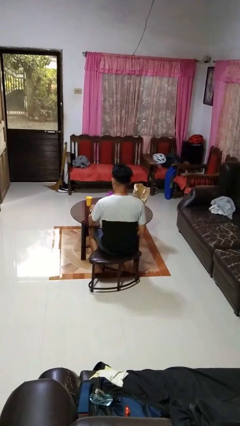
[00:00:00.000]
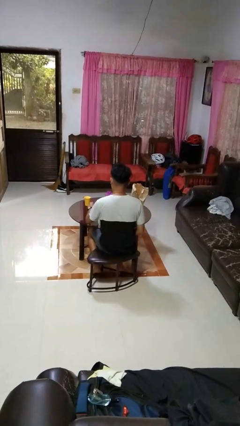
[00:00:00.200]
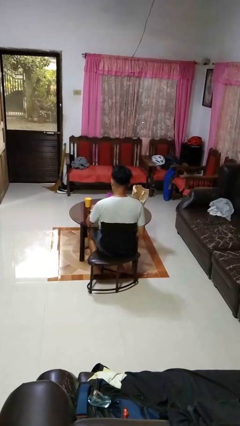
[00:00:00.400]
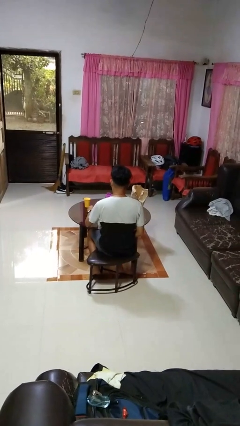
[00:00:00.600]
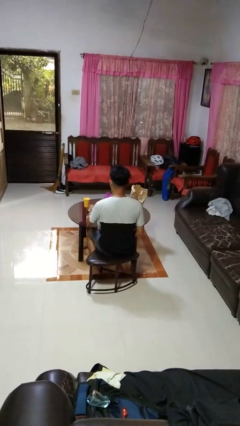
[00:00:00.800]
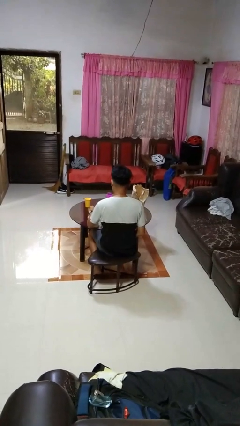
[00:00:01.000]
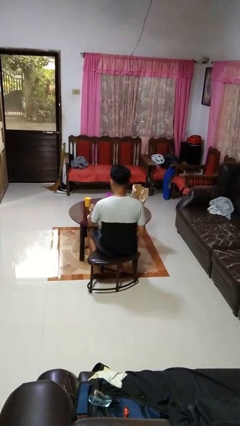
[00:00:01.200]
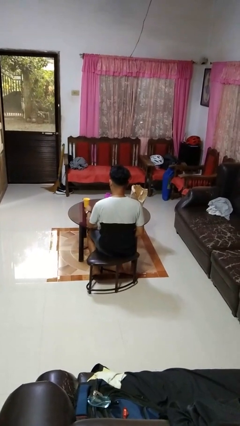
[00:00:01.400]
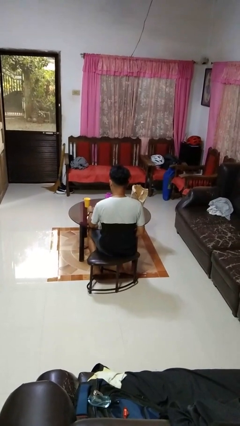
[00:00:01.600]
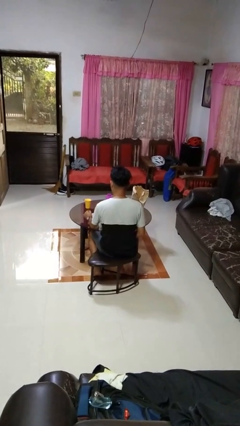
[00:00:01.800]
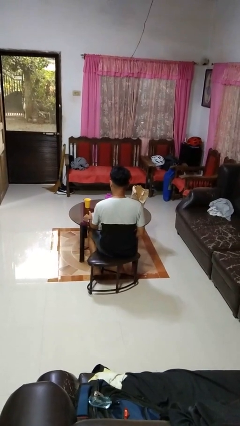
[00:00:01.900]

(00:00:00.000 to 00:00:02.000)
person stirs mug

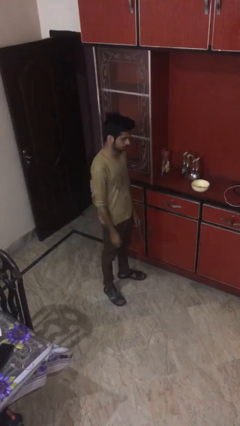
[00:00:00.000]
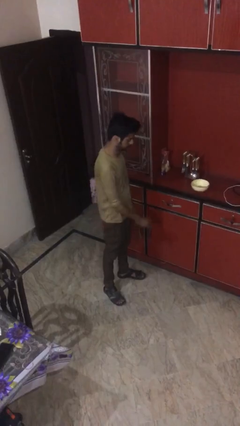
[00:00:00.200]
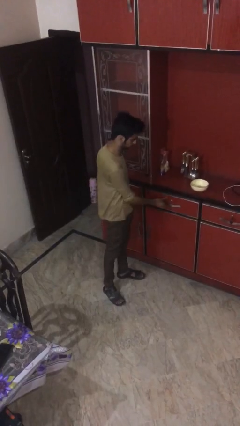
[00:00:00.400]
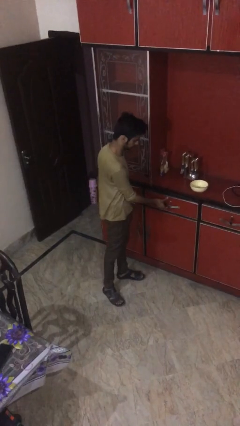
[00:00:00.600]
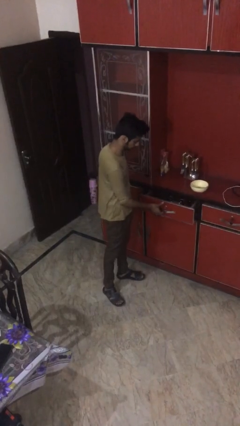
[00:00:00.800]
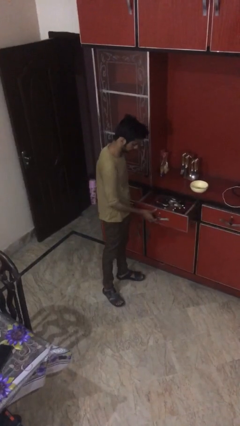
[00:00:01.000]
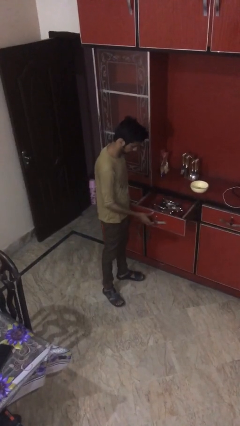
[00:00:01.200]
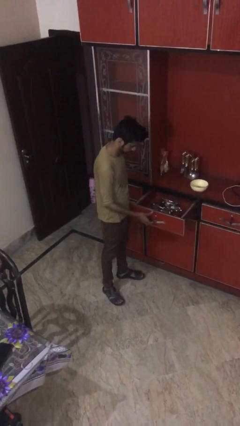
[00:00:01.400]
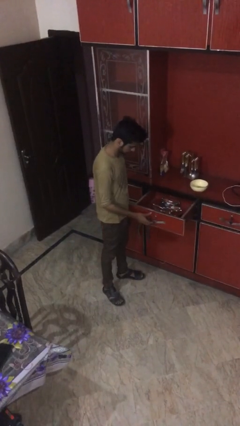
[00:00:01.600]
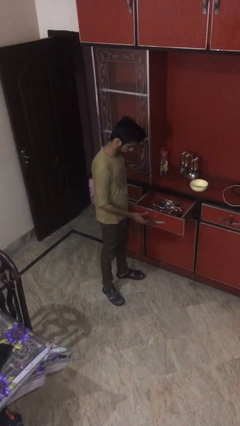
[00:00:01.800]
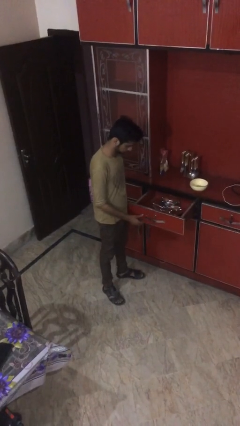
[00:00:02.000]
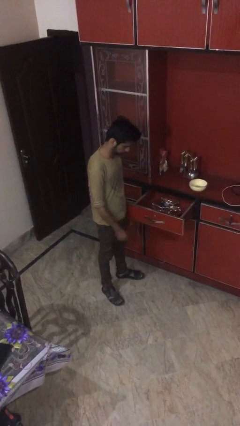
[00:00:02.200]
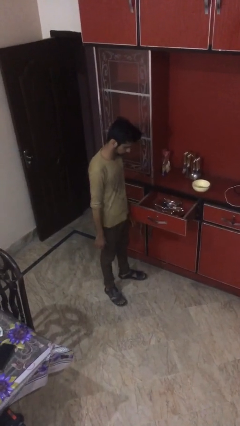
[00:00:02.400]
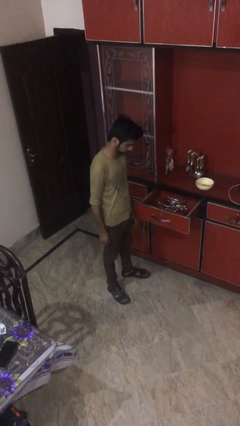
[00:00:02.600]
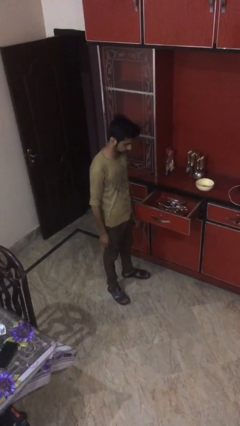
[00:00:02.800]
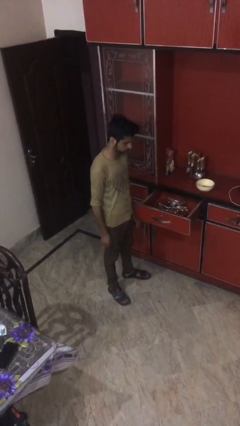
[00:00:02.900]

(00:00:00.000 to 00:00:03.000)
person opens kitchen drawer

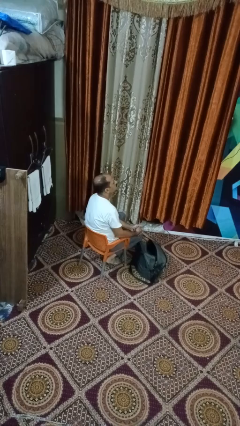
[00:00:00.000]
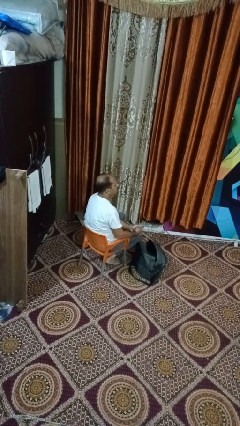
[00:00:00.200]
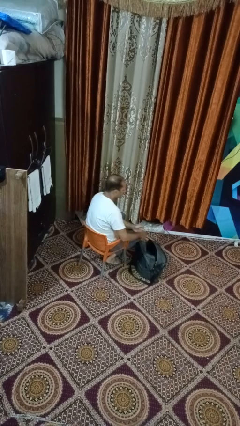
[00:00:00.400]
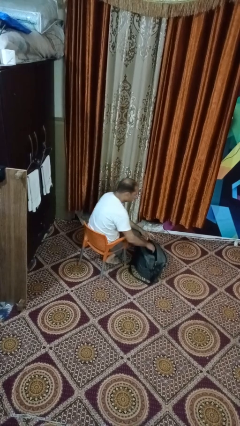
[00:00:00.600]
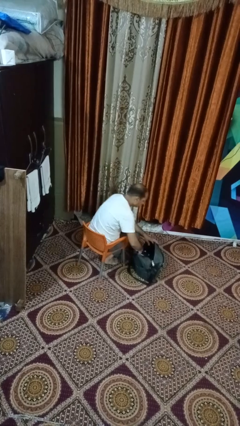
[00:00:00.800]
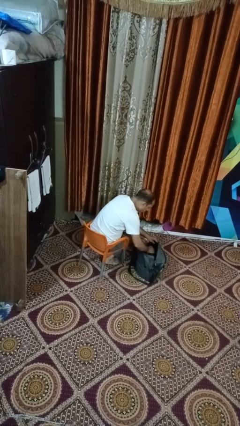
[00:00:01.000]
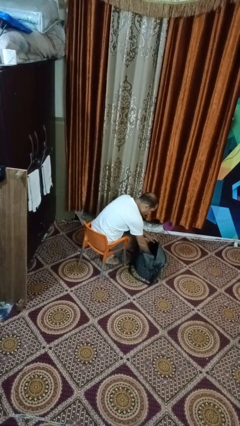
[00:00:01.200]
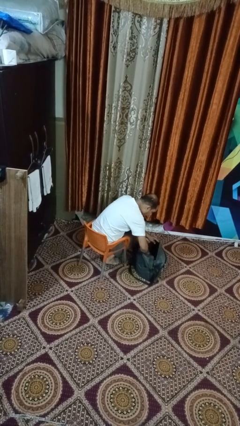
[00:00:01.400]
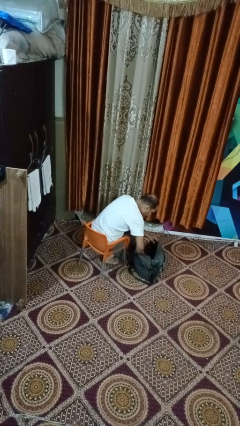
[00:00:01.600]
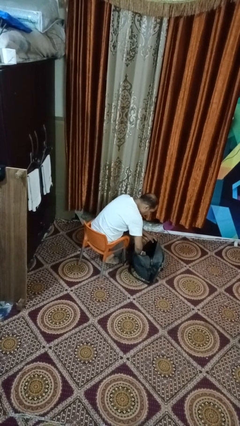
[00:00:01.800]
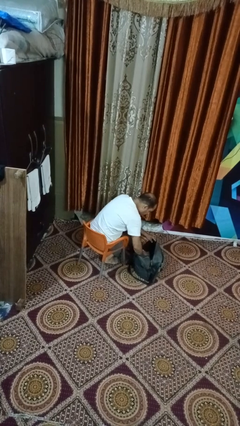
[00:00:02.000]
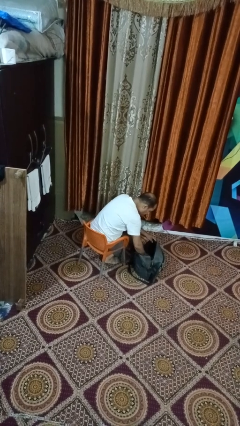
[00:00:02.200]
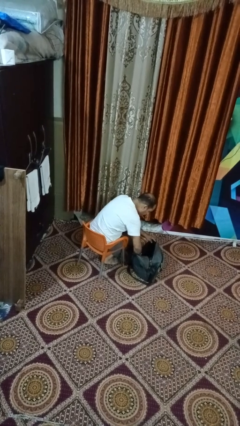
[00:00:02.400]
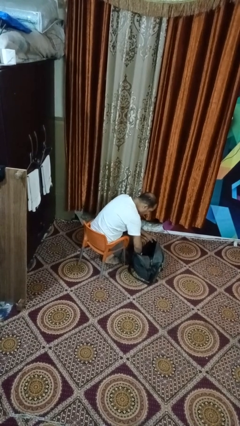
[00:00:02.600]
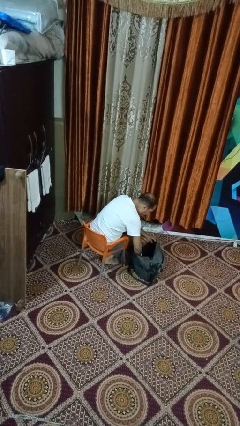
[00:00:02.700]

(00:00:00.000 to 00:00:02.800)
person searches in backpack

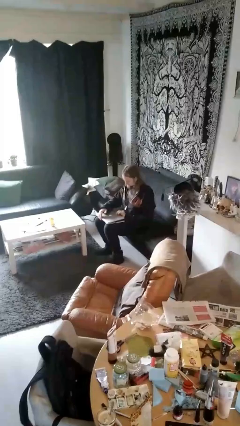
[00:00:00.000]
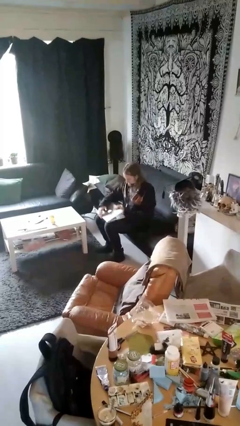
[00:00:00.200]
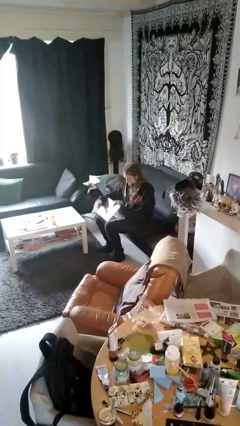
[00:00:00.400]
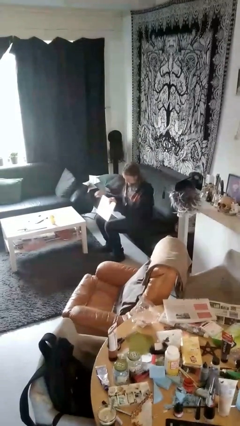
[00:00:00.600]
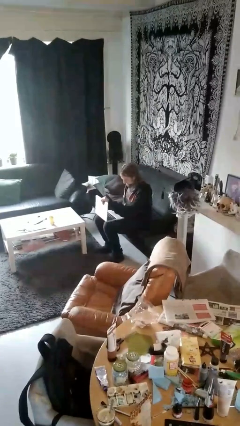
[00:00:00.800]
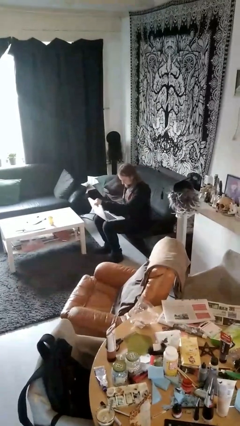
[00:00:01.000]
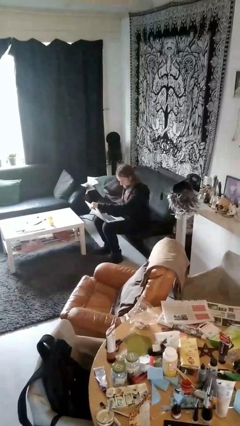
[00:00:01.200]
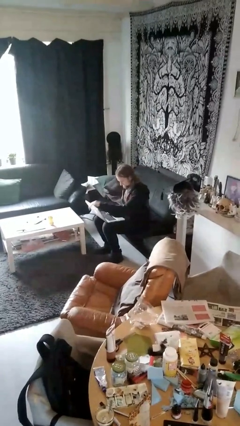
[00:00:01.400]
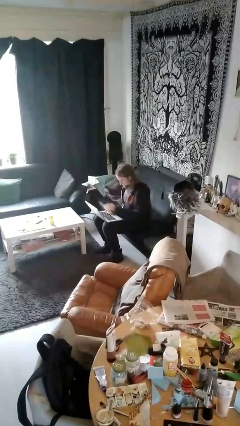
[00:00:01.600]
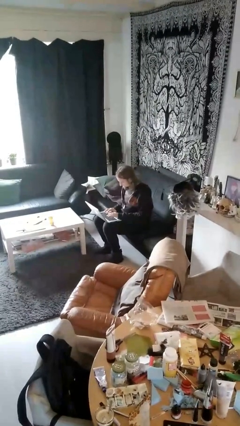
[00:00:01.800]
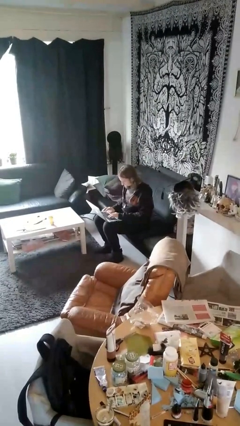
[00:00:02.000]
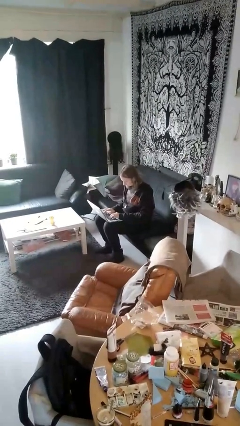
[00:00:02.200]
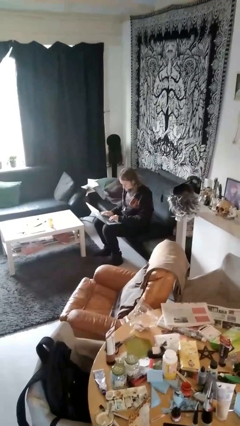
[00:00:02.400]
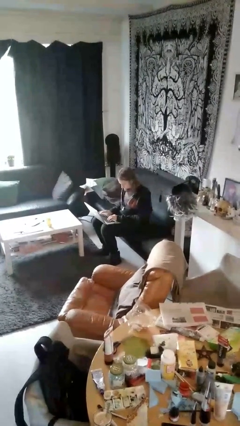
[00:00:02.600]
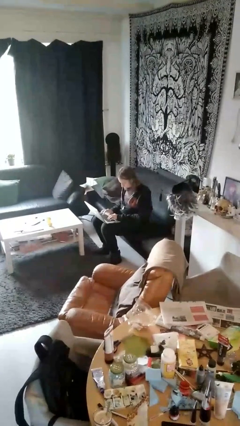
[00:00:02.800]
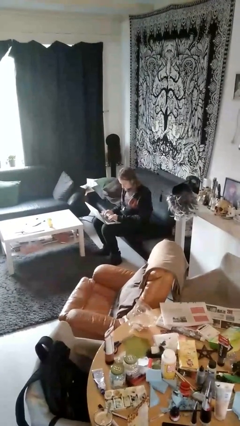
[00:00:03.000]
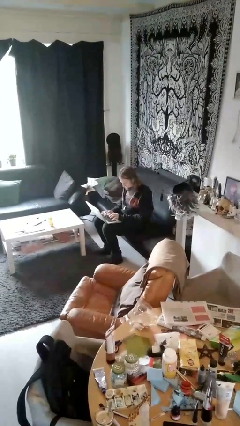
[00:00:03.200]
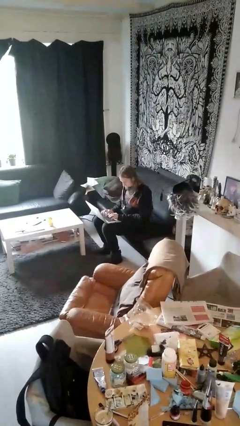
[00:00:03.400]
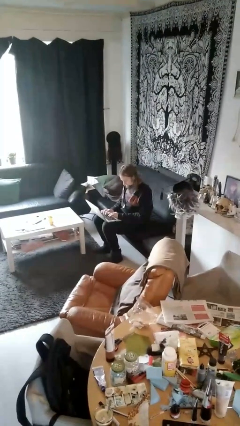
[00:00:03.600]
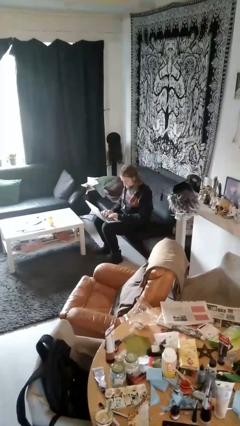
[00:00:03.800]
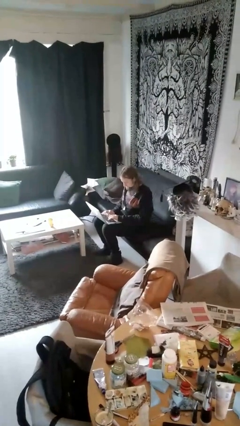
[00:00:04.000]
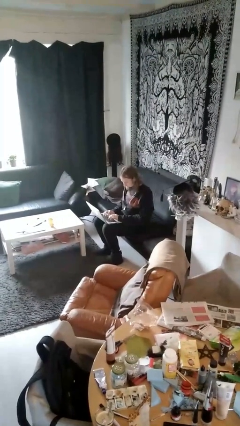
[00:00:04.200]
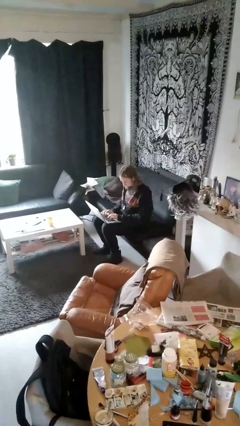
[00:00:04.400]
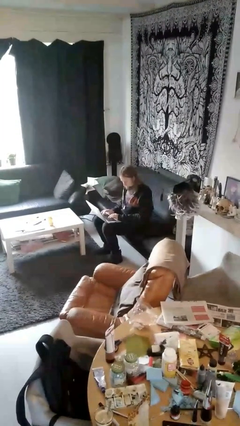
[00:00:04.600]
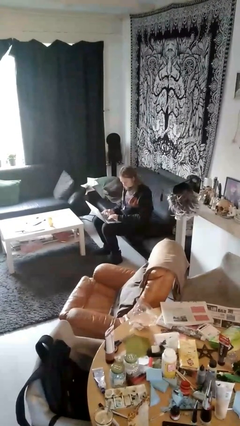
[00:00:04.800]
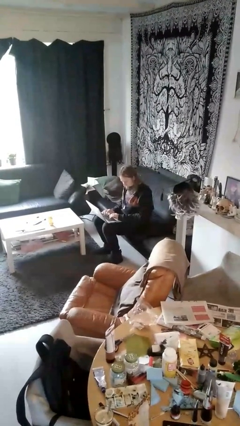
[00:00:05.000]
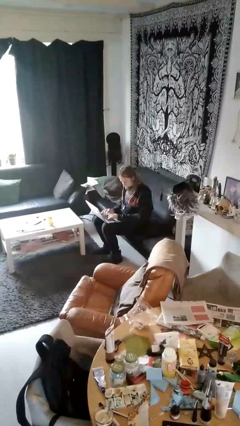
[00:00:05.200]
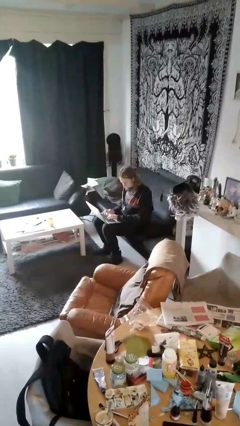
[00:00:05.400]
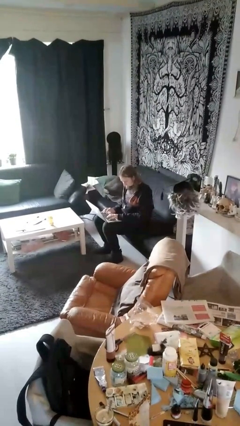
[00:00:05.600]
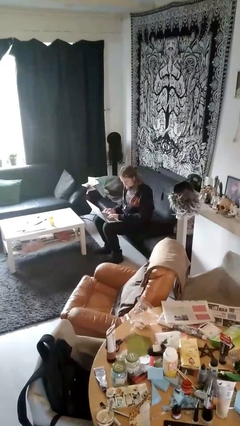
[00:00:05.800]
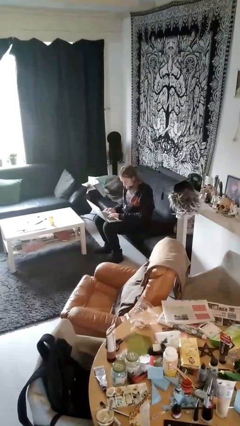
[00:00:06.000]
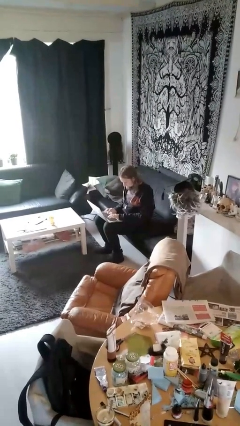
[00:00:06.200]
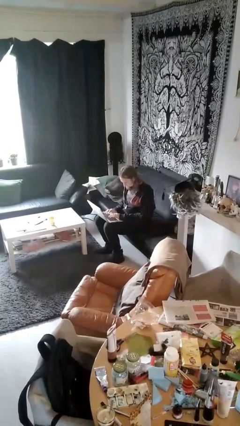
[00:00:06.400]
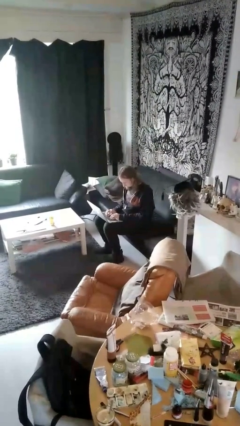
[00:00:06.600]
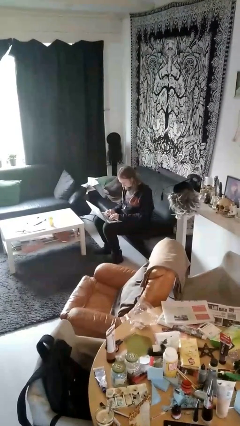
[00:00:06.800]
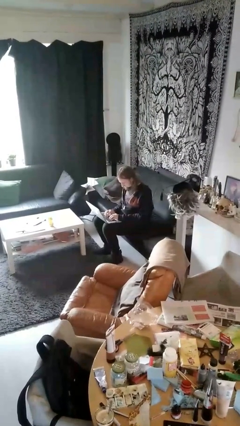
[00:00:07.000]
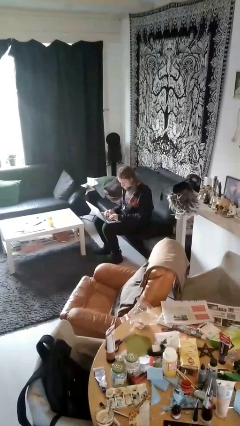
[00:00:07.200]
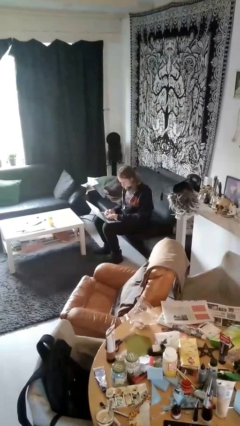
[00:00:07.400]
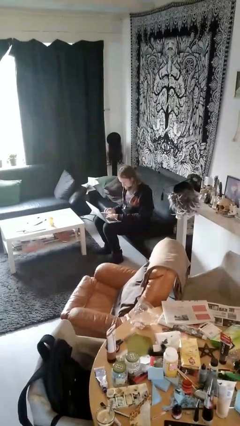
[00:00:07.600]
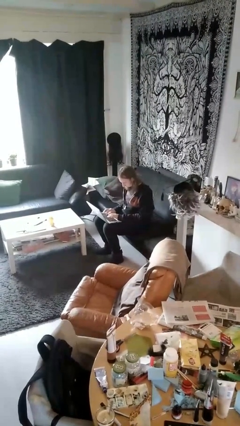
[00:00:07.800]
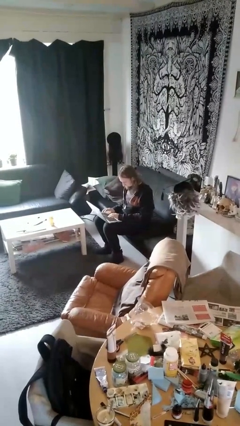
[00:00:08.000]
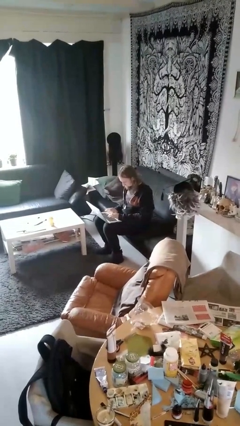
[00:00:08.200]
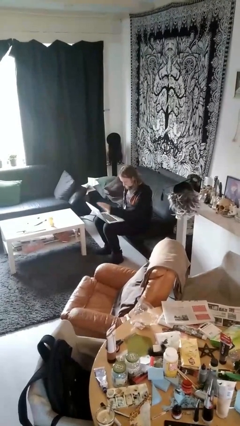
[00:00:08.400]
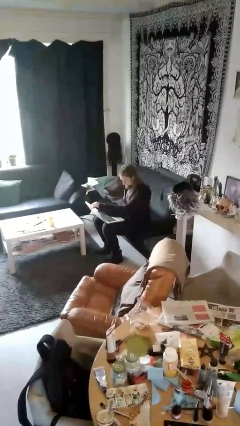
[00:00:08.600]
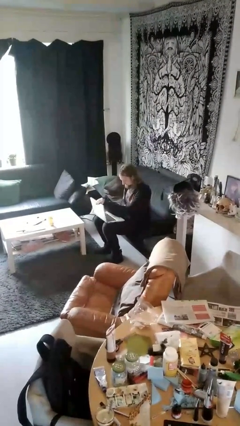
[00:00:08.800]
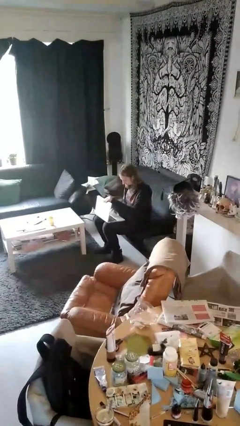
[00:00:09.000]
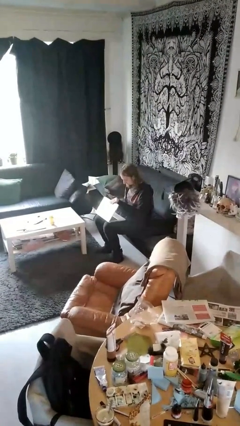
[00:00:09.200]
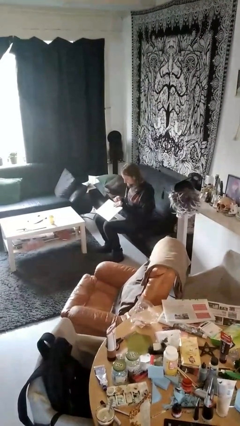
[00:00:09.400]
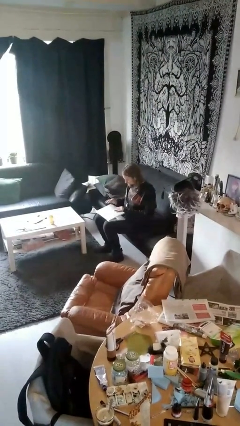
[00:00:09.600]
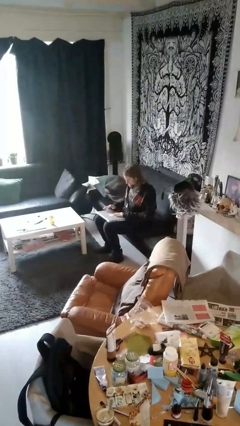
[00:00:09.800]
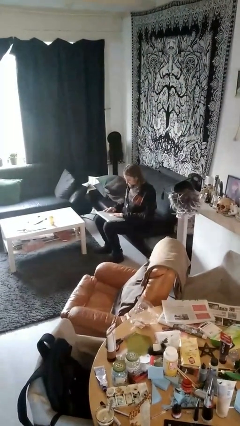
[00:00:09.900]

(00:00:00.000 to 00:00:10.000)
person interacts with laptop
